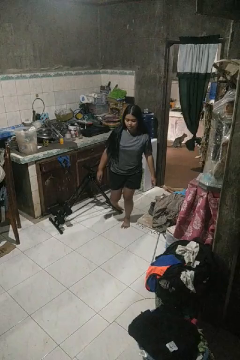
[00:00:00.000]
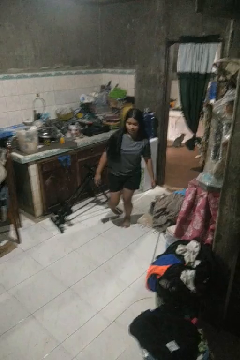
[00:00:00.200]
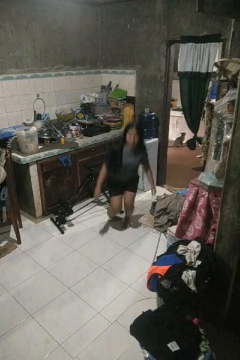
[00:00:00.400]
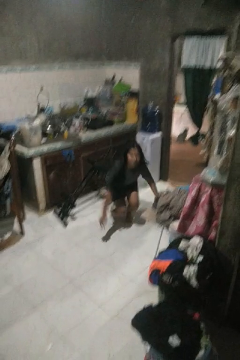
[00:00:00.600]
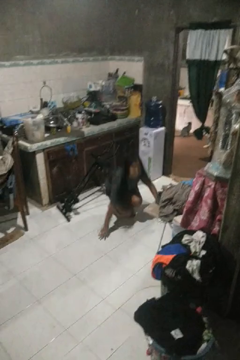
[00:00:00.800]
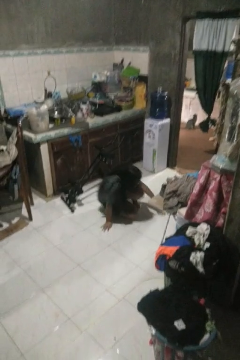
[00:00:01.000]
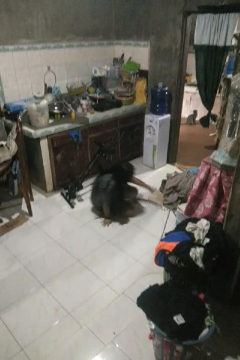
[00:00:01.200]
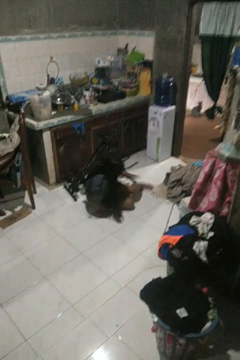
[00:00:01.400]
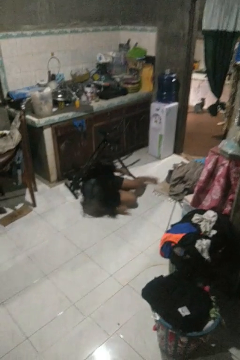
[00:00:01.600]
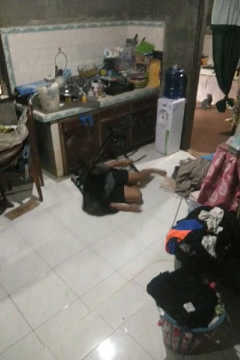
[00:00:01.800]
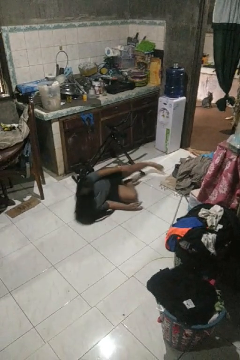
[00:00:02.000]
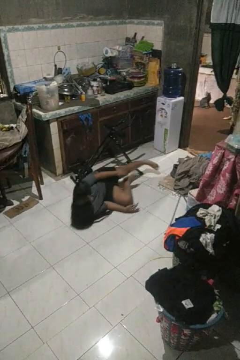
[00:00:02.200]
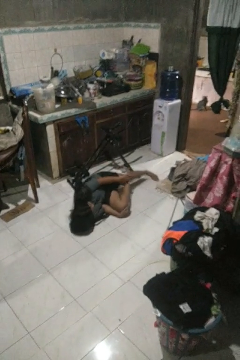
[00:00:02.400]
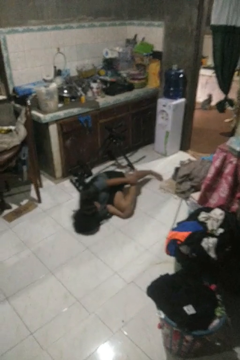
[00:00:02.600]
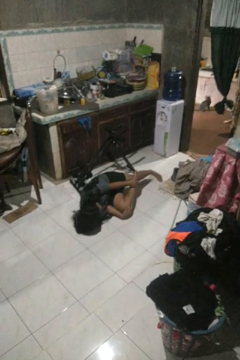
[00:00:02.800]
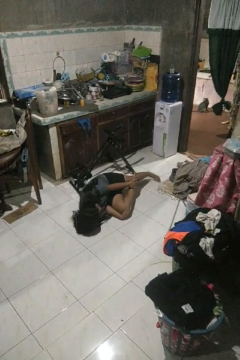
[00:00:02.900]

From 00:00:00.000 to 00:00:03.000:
person lies down on floor

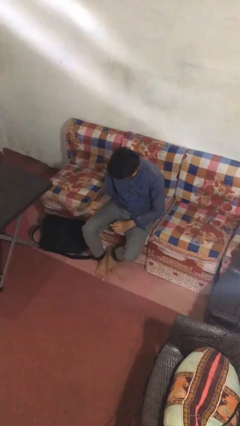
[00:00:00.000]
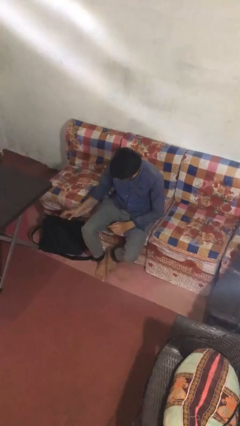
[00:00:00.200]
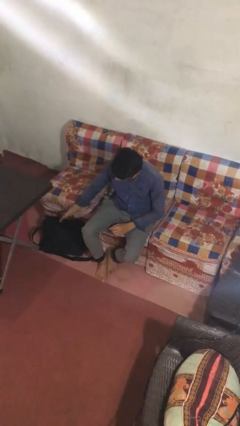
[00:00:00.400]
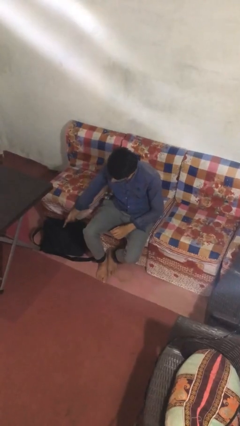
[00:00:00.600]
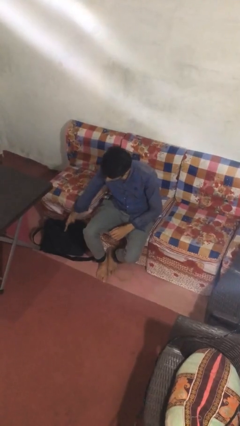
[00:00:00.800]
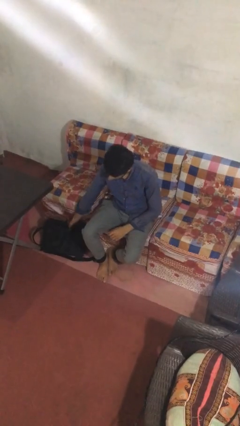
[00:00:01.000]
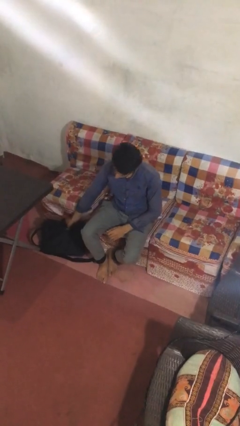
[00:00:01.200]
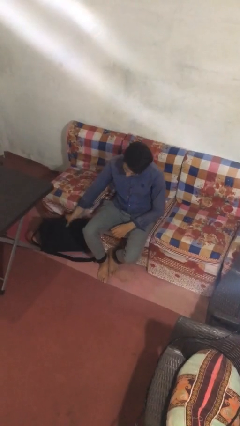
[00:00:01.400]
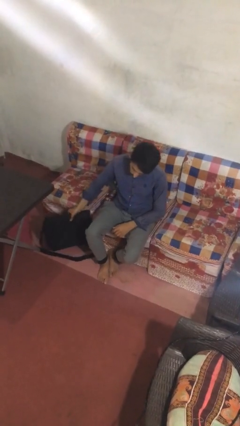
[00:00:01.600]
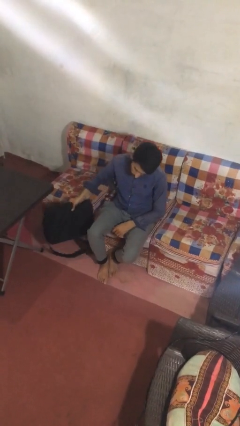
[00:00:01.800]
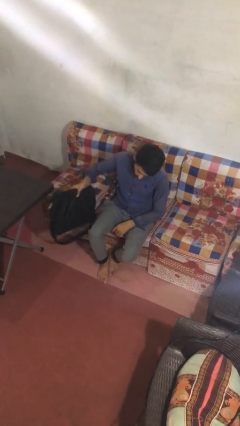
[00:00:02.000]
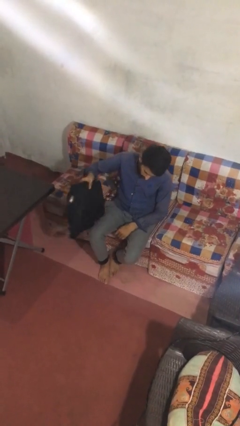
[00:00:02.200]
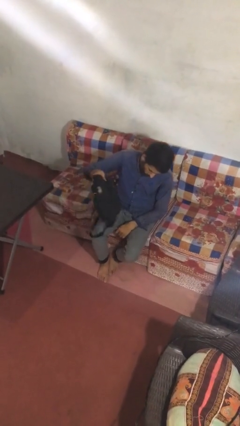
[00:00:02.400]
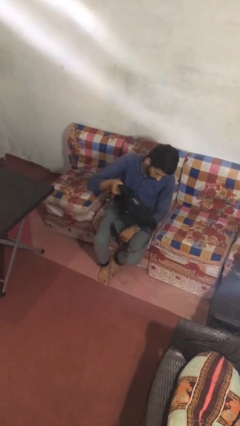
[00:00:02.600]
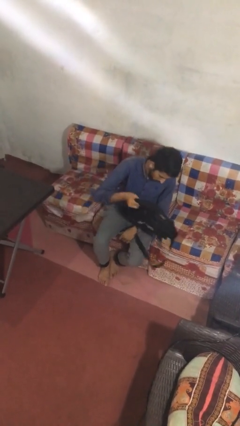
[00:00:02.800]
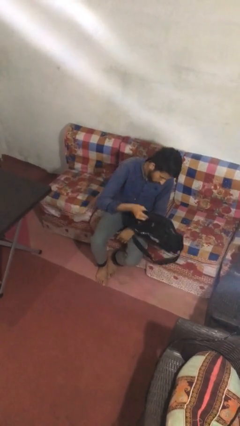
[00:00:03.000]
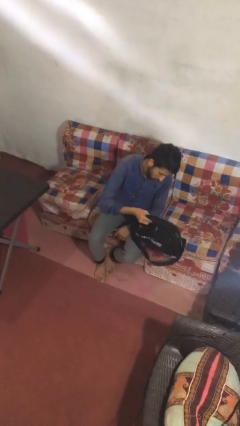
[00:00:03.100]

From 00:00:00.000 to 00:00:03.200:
person picks up object from floor

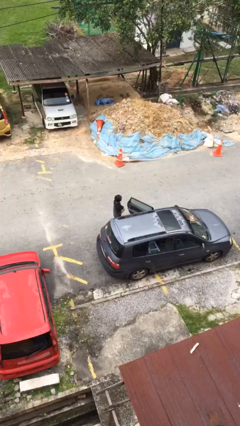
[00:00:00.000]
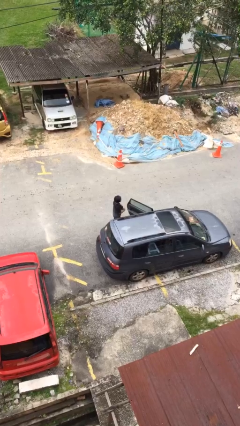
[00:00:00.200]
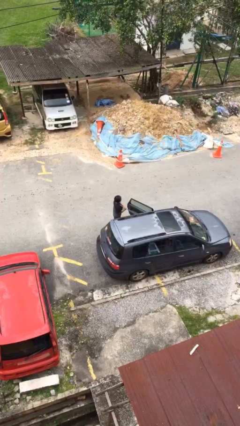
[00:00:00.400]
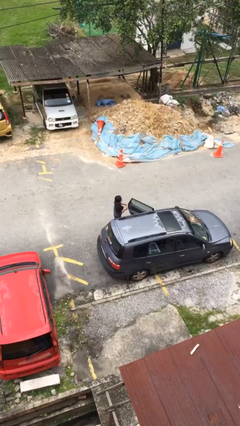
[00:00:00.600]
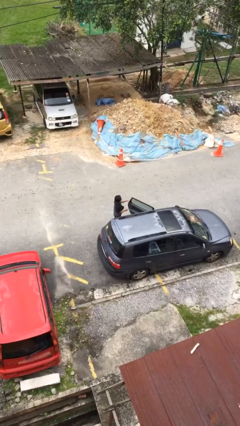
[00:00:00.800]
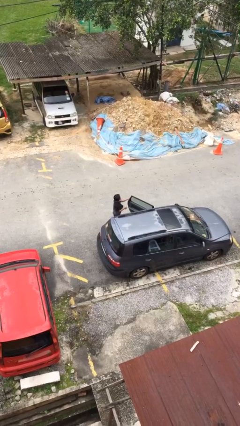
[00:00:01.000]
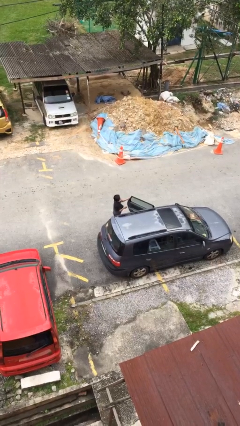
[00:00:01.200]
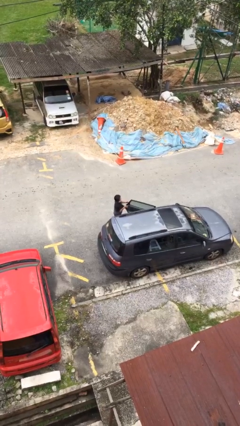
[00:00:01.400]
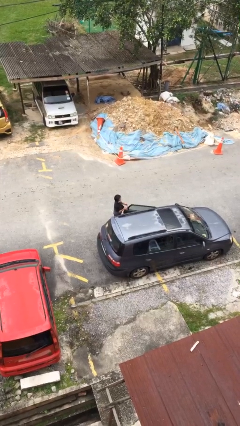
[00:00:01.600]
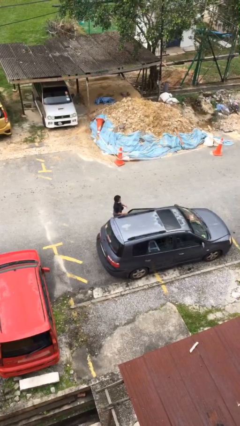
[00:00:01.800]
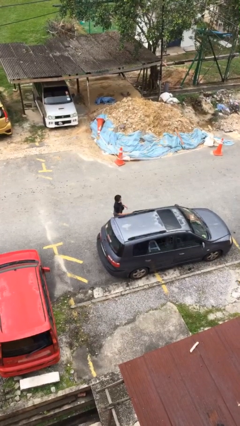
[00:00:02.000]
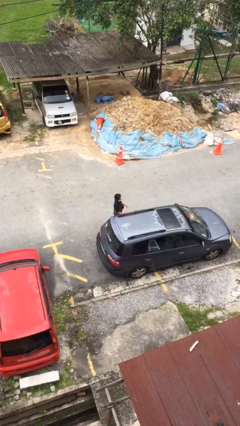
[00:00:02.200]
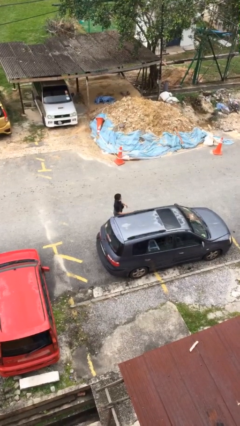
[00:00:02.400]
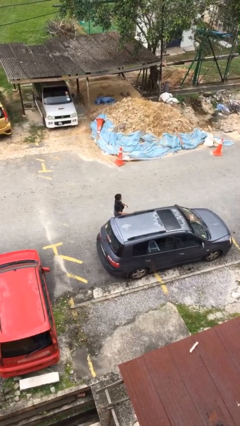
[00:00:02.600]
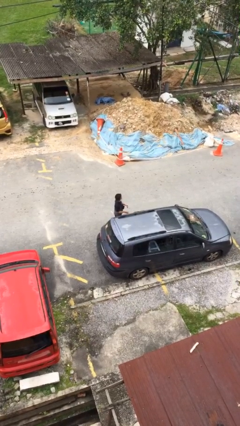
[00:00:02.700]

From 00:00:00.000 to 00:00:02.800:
person closes car door

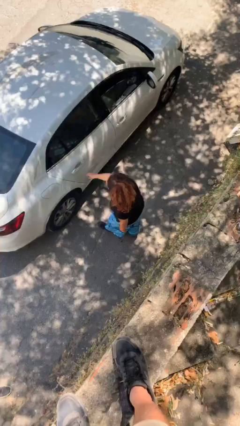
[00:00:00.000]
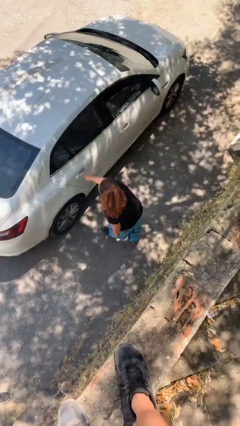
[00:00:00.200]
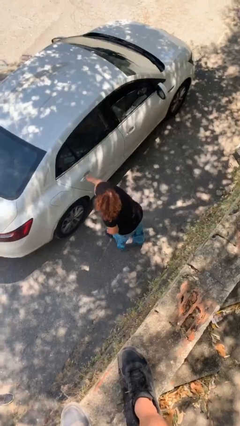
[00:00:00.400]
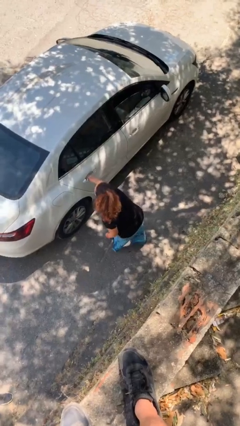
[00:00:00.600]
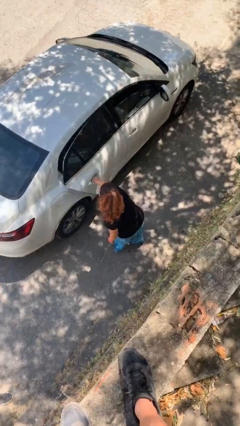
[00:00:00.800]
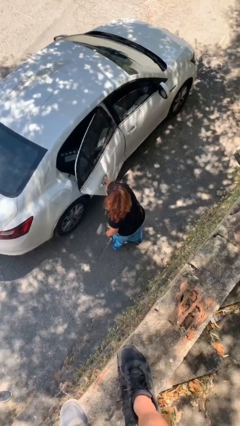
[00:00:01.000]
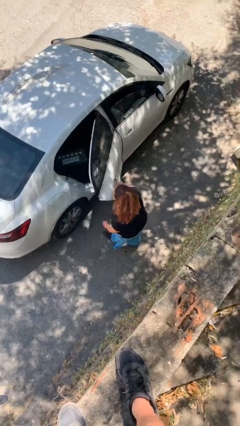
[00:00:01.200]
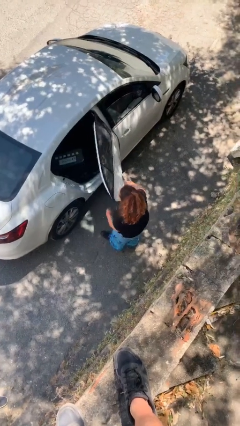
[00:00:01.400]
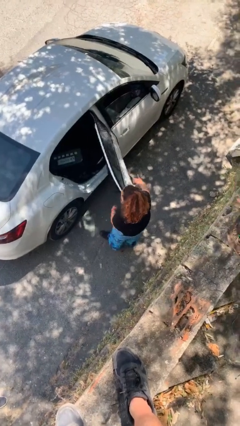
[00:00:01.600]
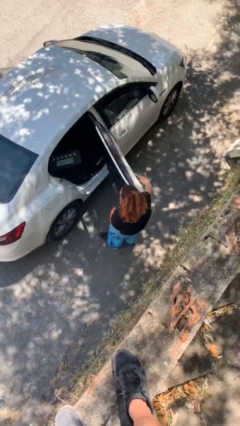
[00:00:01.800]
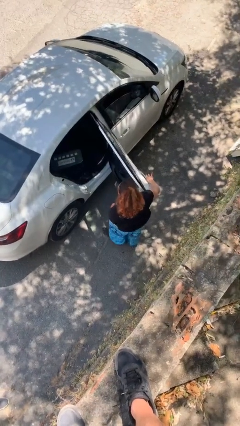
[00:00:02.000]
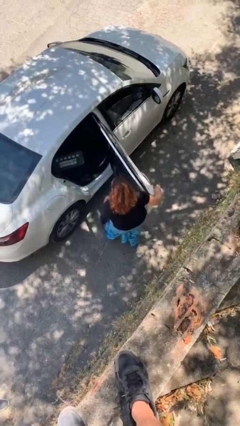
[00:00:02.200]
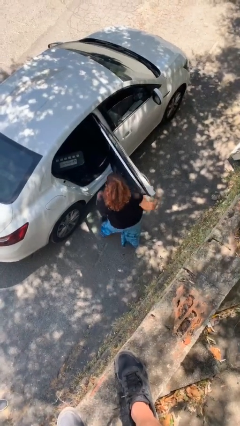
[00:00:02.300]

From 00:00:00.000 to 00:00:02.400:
person opens car door

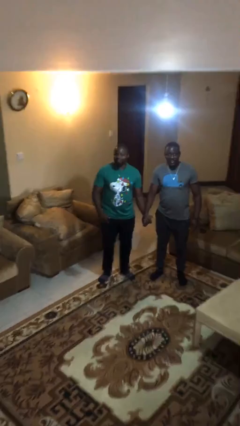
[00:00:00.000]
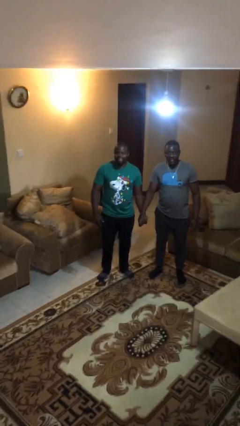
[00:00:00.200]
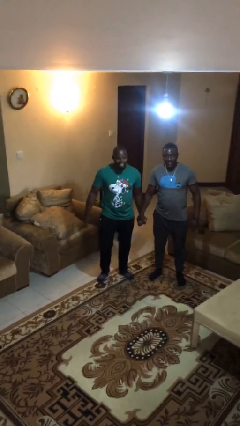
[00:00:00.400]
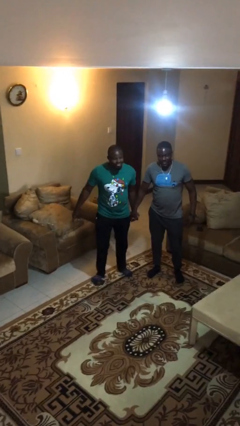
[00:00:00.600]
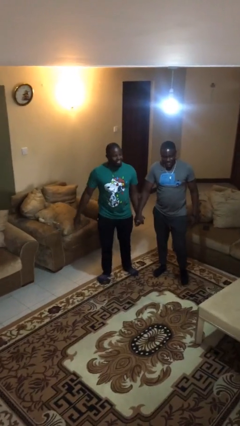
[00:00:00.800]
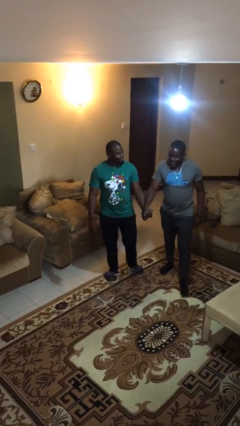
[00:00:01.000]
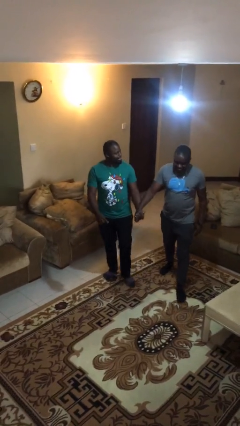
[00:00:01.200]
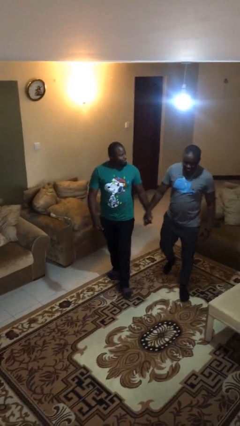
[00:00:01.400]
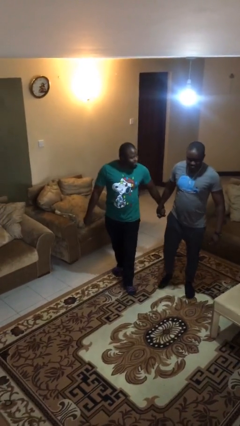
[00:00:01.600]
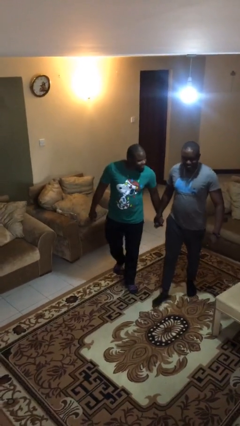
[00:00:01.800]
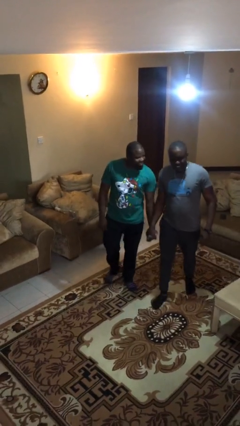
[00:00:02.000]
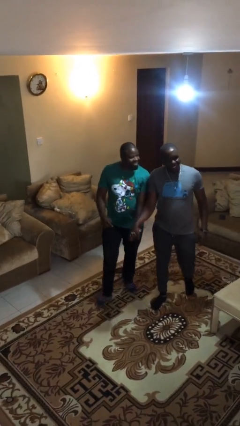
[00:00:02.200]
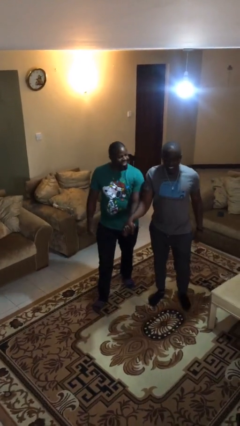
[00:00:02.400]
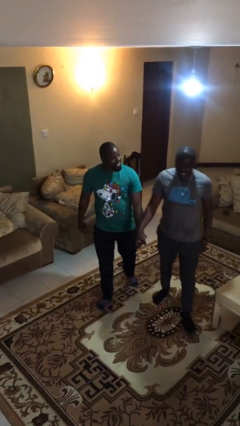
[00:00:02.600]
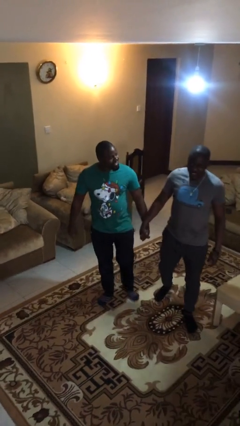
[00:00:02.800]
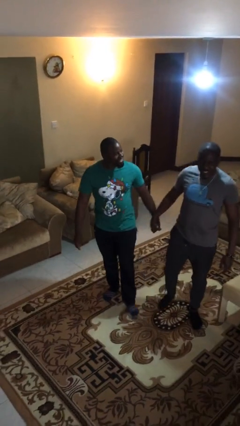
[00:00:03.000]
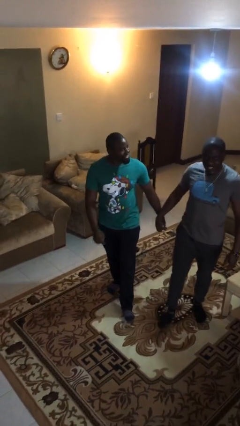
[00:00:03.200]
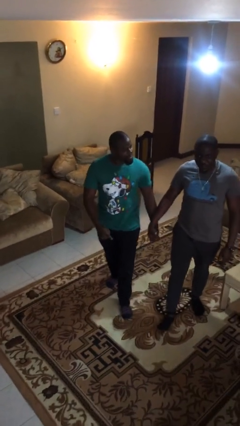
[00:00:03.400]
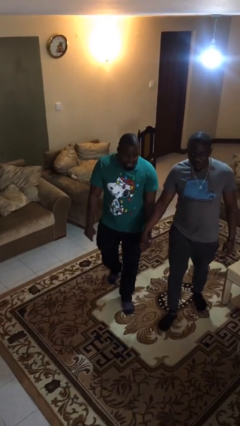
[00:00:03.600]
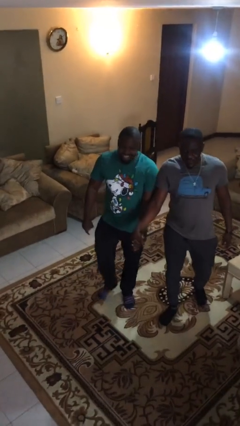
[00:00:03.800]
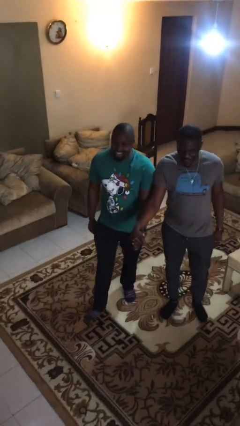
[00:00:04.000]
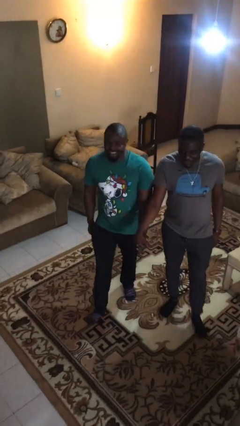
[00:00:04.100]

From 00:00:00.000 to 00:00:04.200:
person holds hand

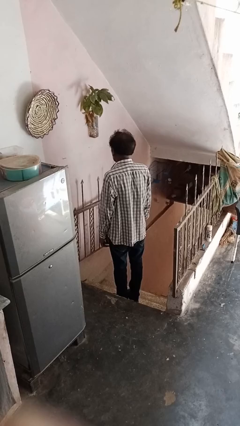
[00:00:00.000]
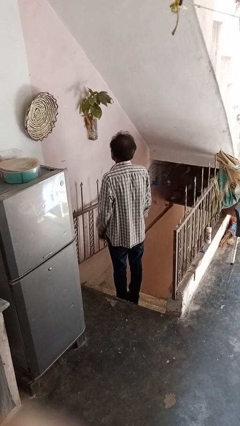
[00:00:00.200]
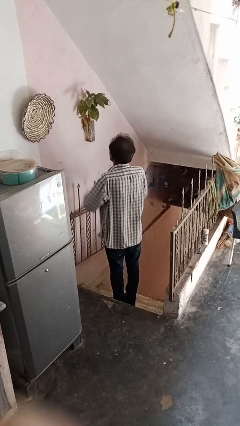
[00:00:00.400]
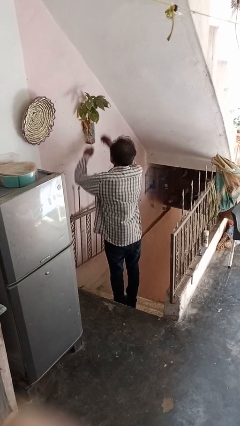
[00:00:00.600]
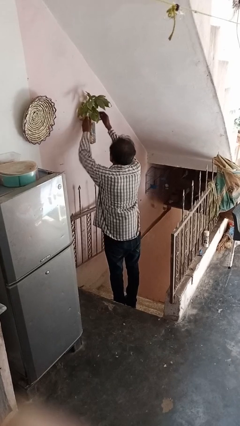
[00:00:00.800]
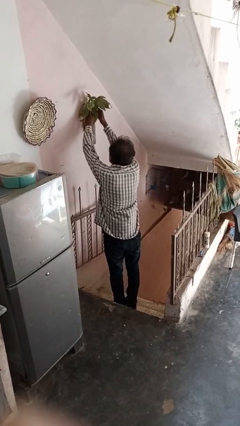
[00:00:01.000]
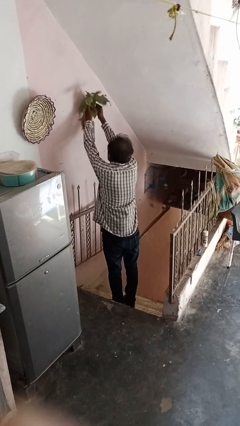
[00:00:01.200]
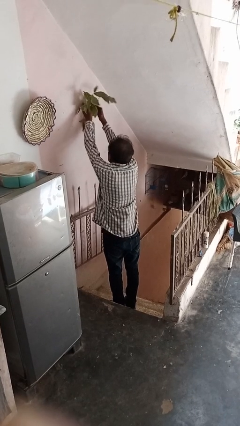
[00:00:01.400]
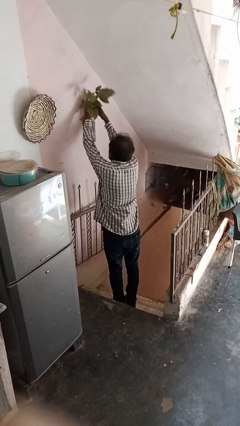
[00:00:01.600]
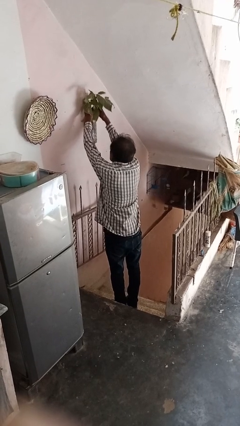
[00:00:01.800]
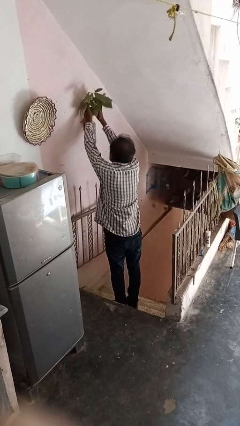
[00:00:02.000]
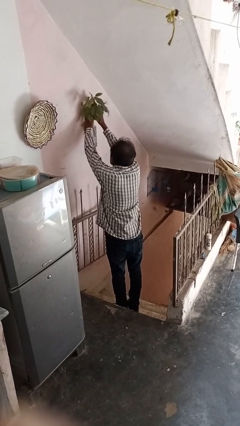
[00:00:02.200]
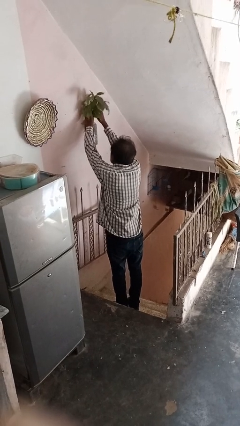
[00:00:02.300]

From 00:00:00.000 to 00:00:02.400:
person arranges flowers in vase
